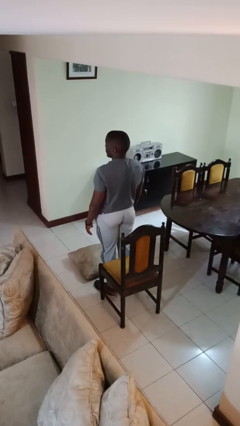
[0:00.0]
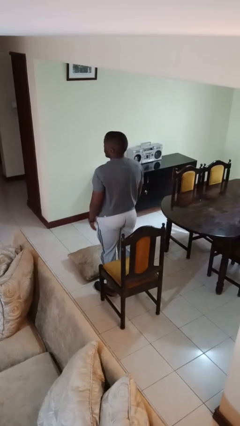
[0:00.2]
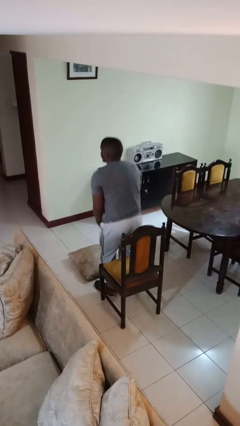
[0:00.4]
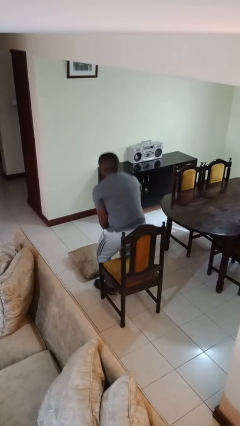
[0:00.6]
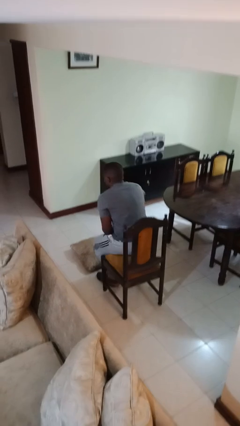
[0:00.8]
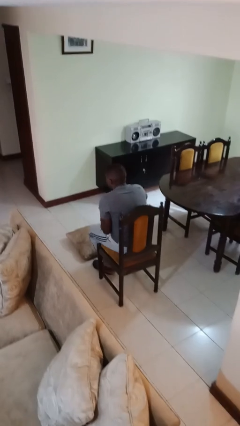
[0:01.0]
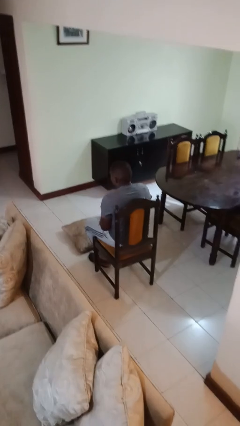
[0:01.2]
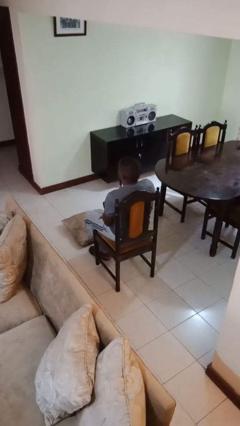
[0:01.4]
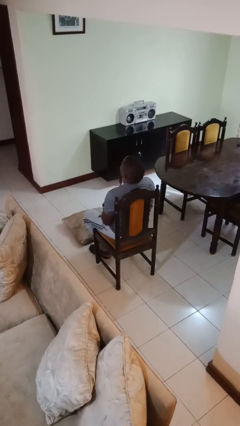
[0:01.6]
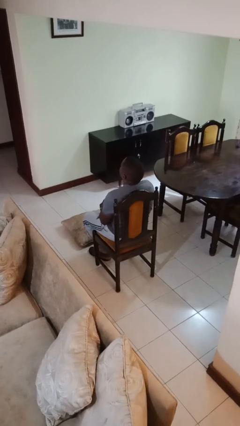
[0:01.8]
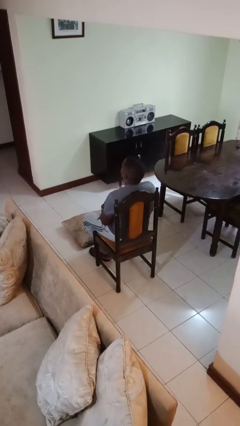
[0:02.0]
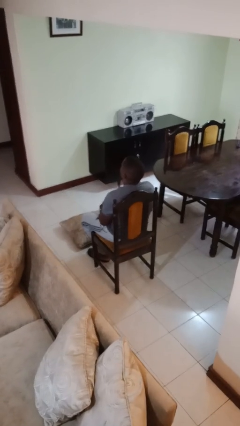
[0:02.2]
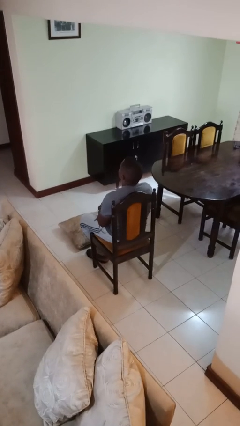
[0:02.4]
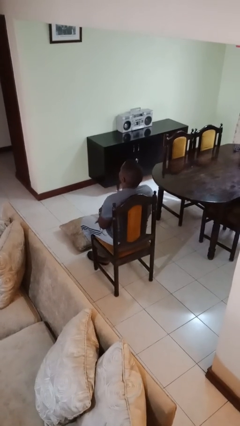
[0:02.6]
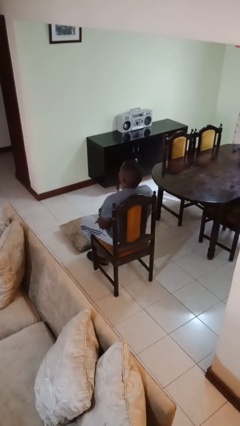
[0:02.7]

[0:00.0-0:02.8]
person sits down

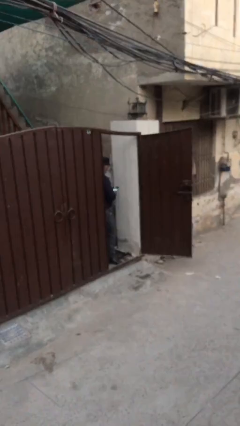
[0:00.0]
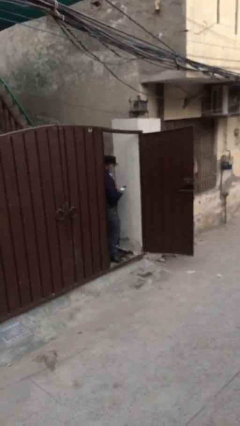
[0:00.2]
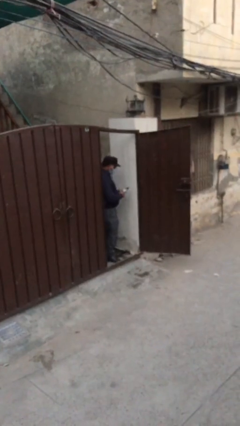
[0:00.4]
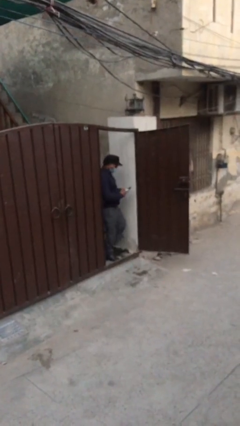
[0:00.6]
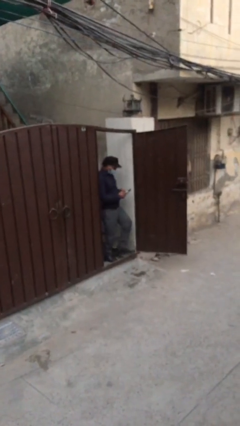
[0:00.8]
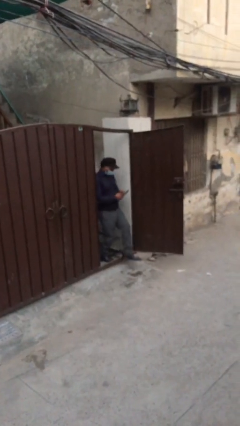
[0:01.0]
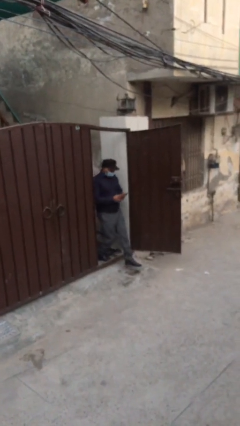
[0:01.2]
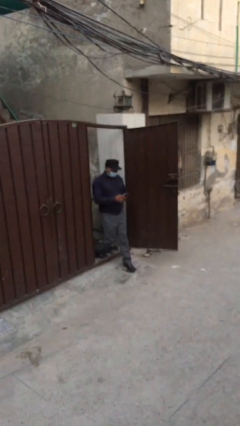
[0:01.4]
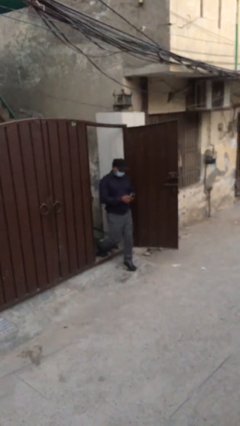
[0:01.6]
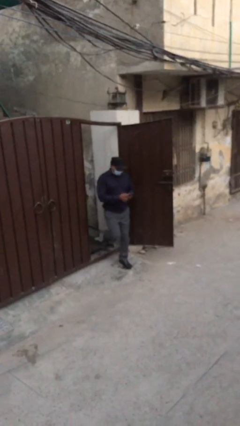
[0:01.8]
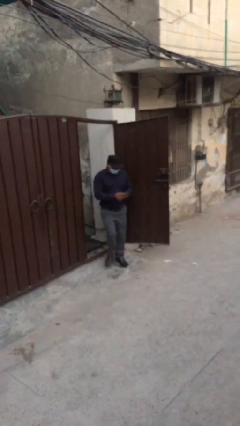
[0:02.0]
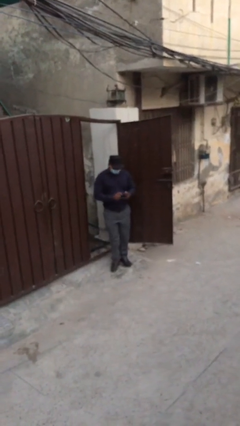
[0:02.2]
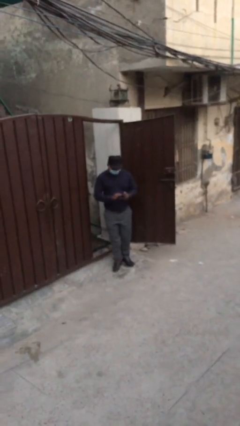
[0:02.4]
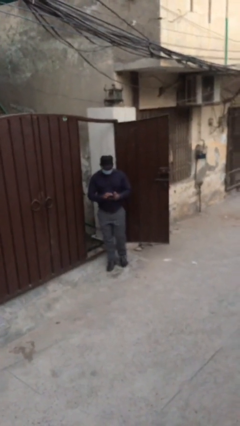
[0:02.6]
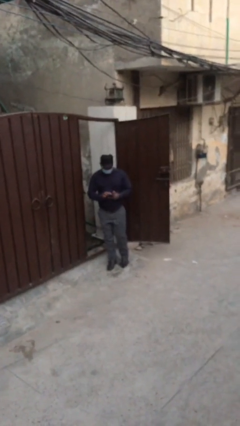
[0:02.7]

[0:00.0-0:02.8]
person enters scene through structure

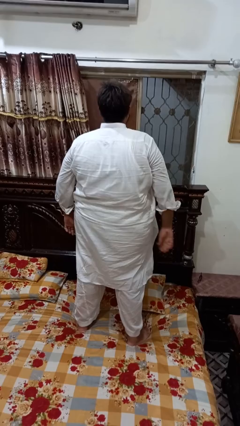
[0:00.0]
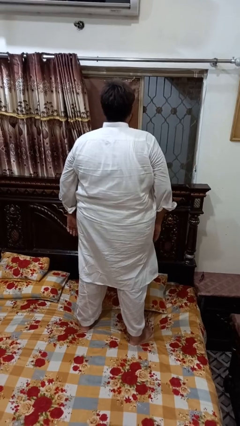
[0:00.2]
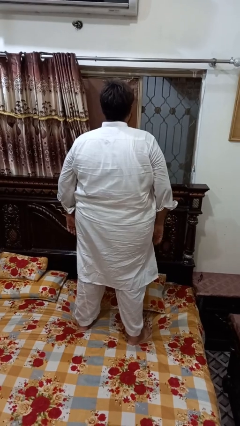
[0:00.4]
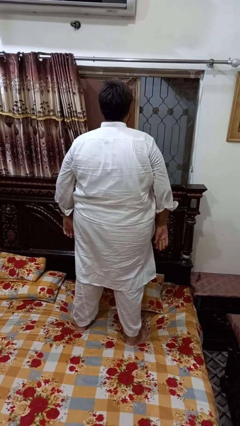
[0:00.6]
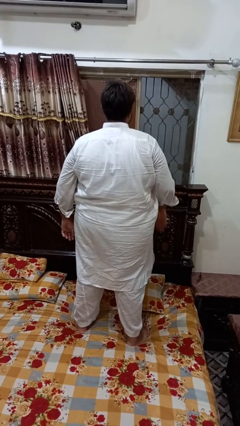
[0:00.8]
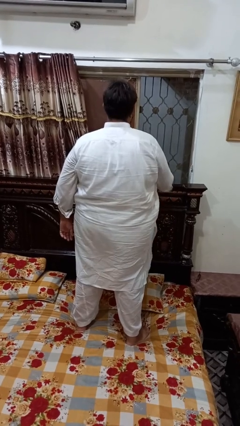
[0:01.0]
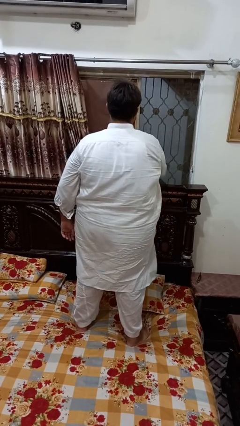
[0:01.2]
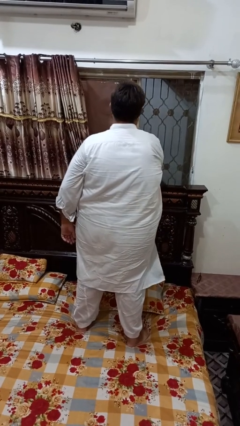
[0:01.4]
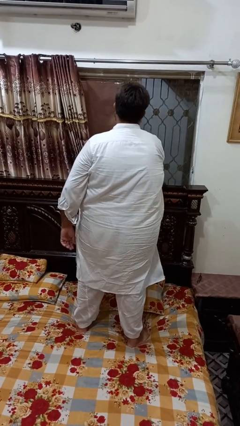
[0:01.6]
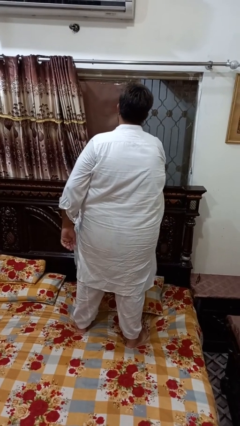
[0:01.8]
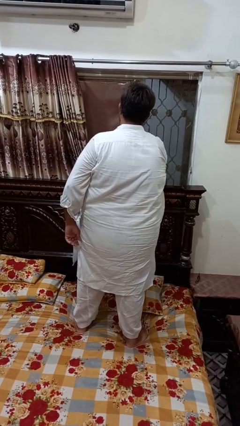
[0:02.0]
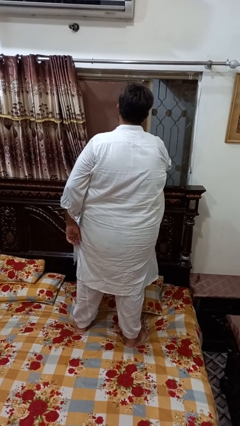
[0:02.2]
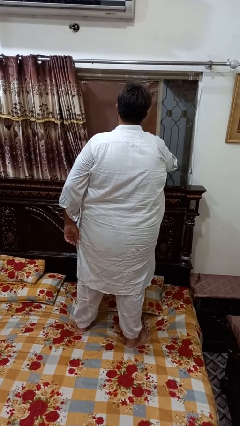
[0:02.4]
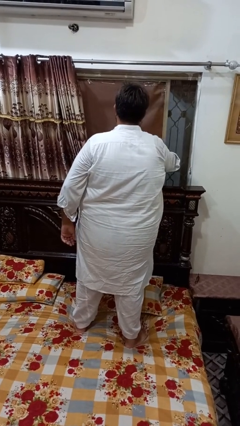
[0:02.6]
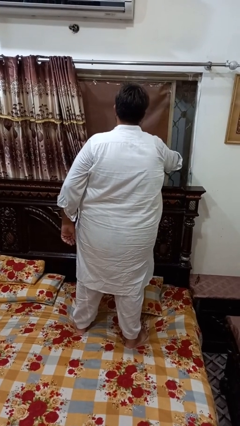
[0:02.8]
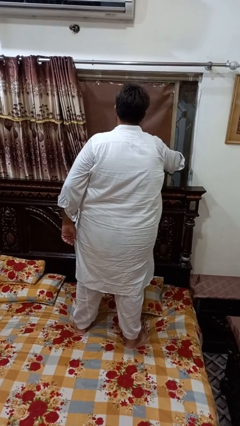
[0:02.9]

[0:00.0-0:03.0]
person closes home window

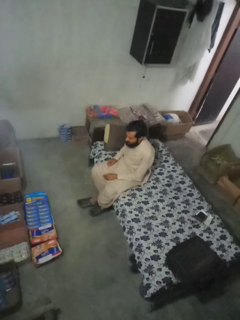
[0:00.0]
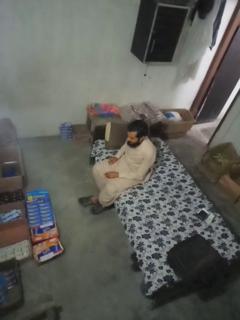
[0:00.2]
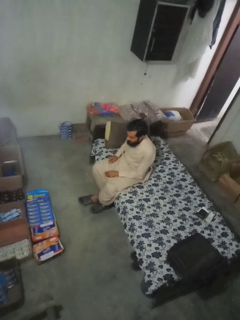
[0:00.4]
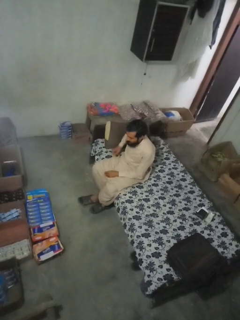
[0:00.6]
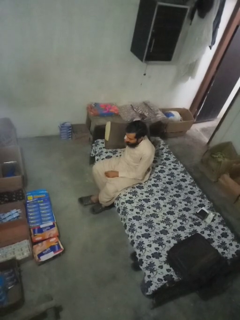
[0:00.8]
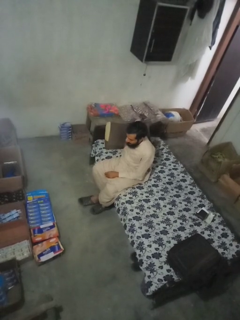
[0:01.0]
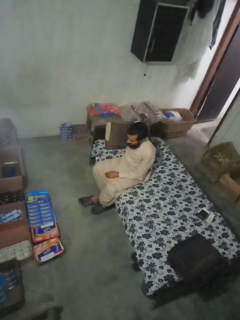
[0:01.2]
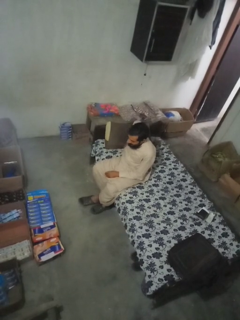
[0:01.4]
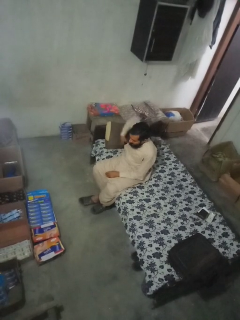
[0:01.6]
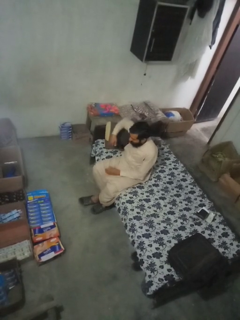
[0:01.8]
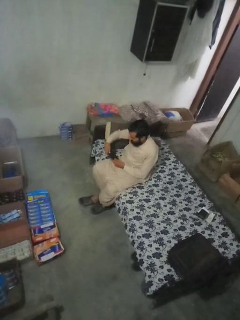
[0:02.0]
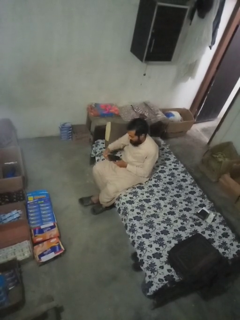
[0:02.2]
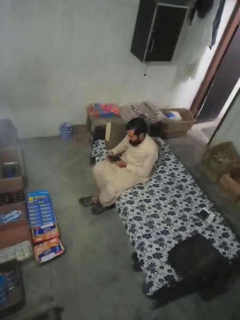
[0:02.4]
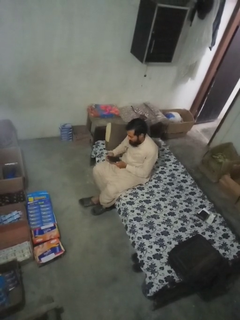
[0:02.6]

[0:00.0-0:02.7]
person takes phone from pocket

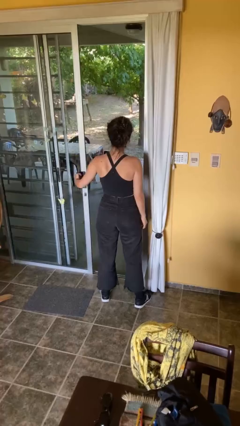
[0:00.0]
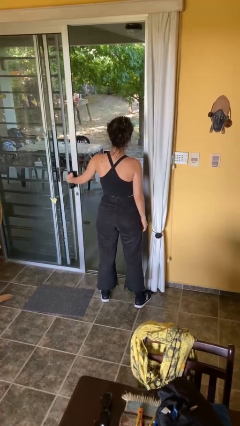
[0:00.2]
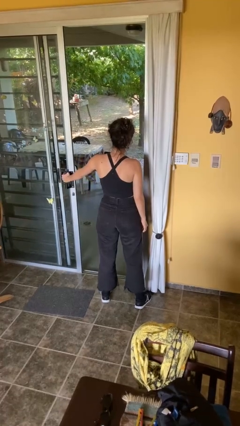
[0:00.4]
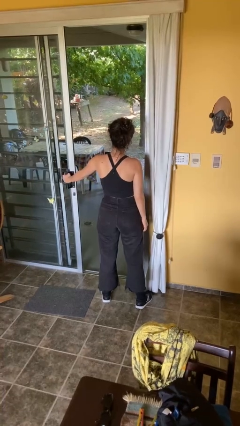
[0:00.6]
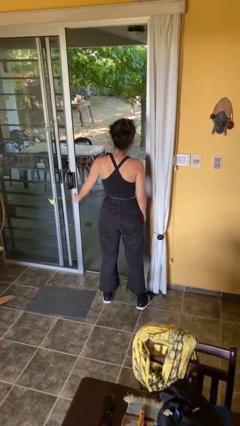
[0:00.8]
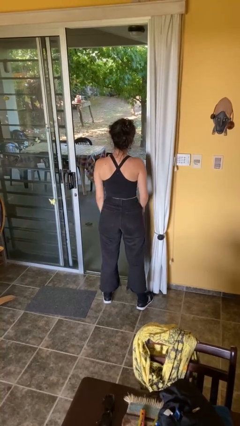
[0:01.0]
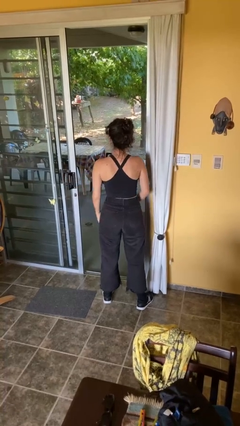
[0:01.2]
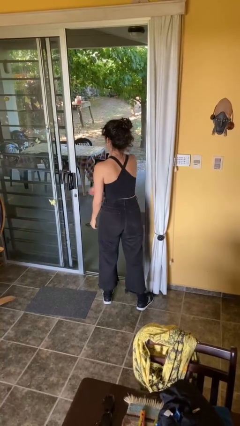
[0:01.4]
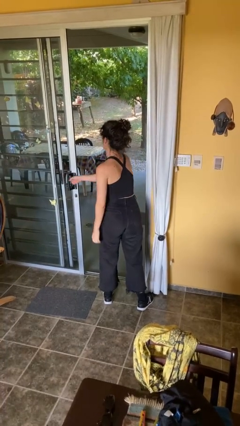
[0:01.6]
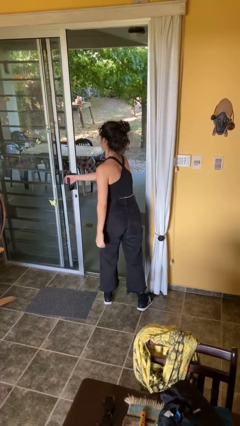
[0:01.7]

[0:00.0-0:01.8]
person opens facility door

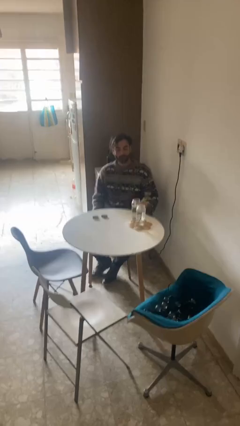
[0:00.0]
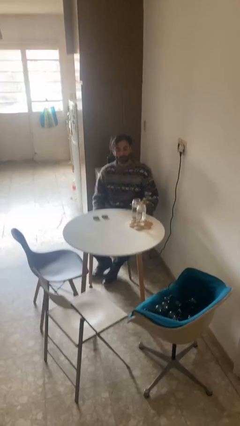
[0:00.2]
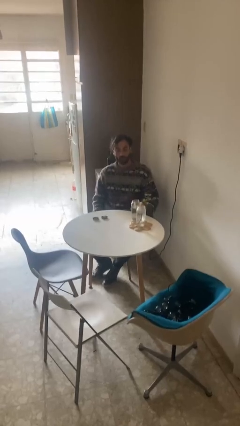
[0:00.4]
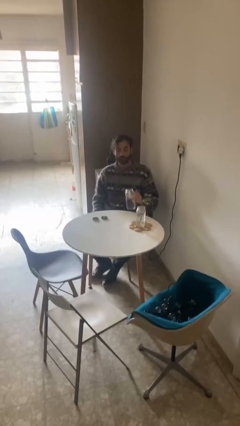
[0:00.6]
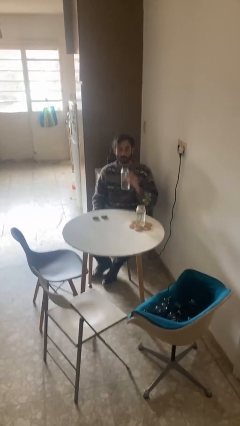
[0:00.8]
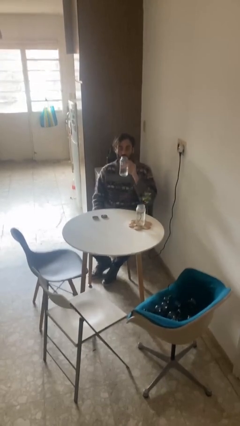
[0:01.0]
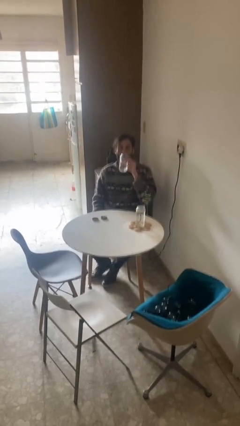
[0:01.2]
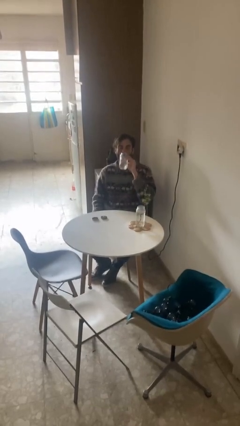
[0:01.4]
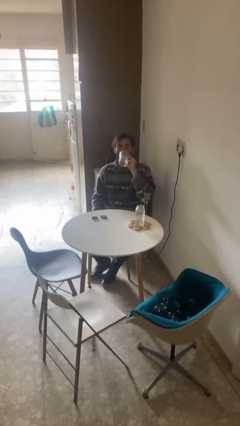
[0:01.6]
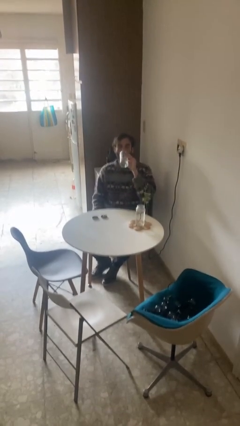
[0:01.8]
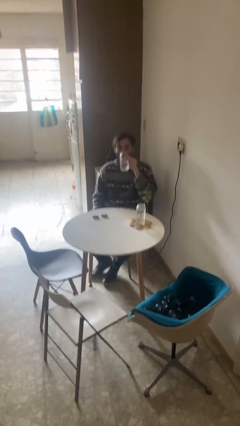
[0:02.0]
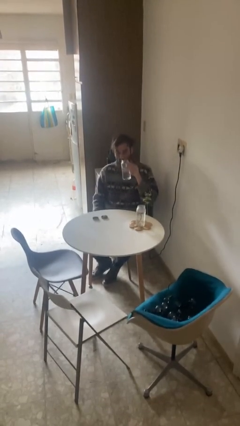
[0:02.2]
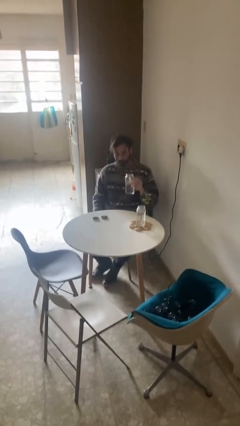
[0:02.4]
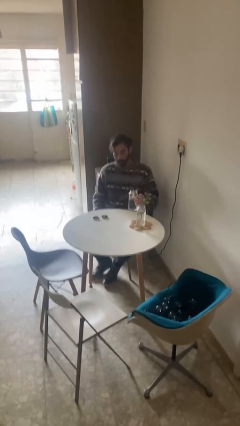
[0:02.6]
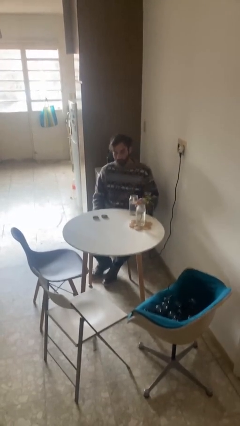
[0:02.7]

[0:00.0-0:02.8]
person drinks from cup

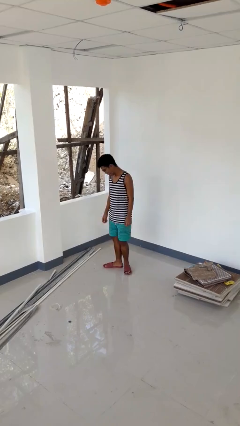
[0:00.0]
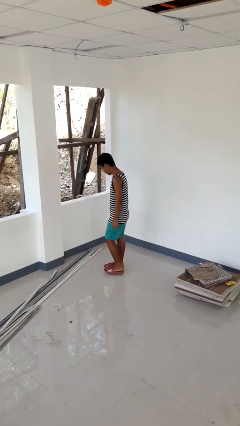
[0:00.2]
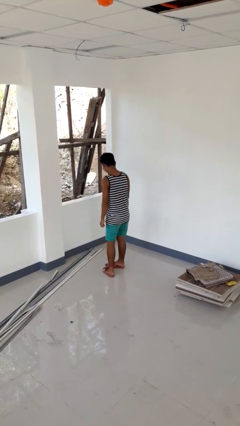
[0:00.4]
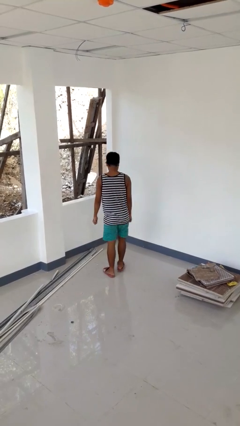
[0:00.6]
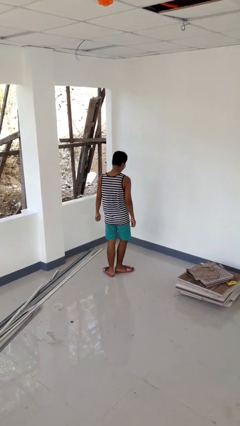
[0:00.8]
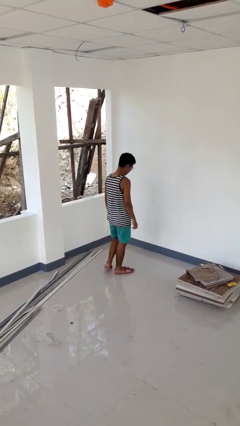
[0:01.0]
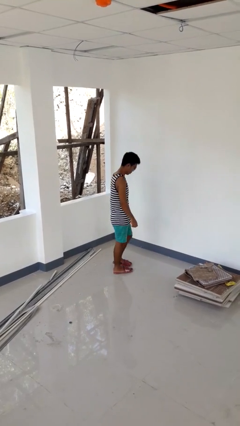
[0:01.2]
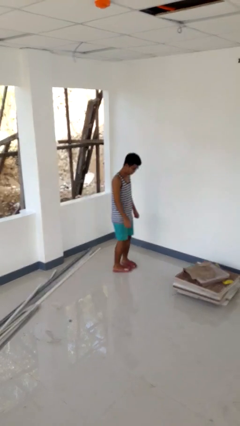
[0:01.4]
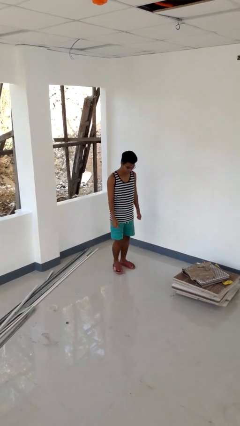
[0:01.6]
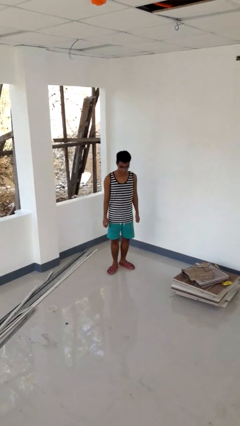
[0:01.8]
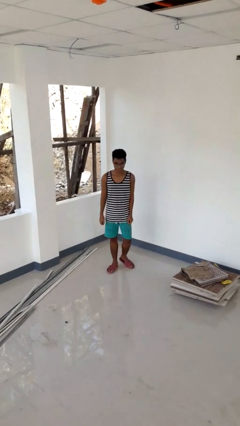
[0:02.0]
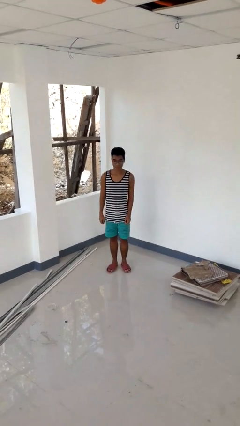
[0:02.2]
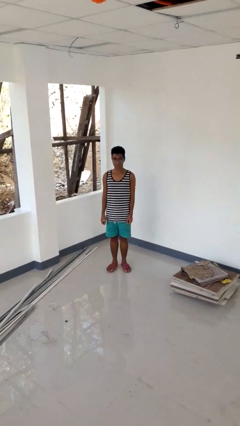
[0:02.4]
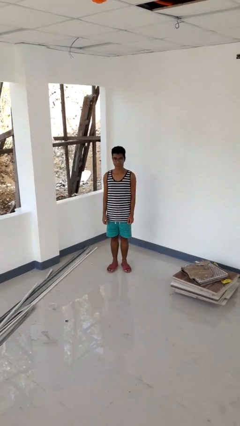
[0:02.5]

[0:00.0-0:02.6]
person twirls
